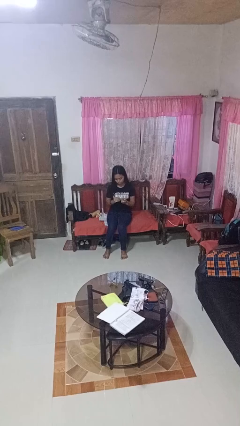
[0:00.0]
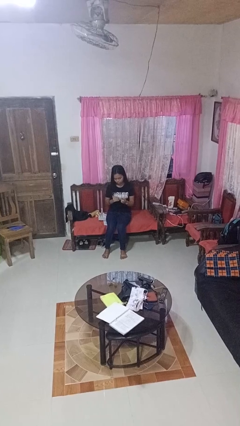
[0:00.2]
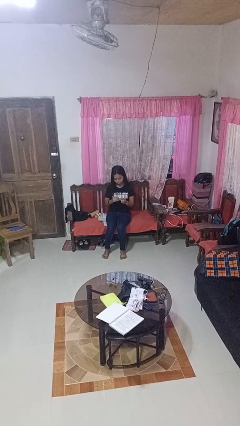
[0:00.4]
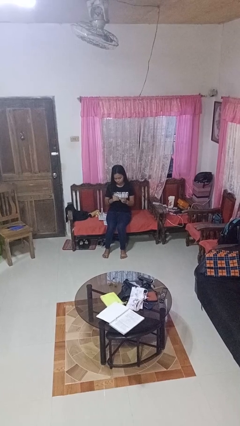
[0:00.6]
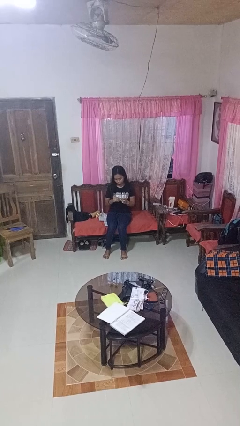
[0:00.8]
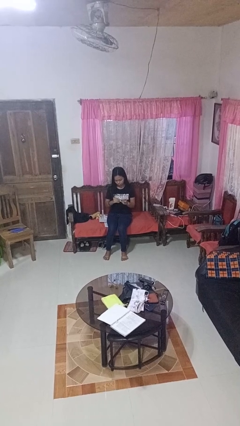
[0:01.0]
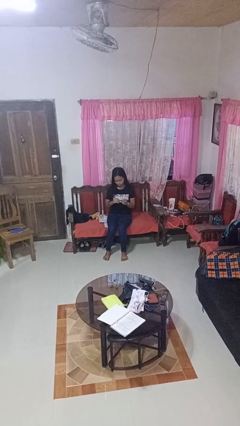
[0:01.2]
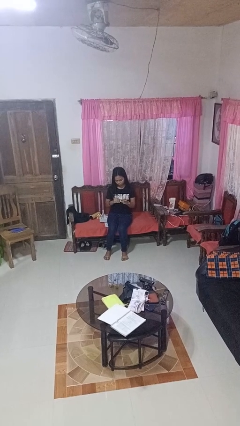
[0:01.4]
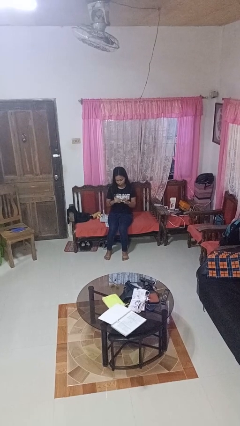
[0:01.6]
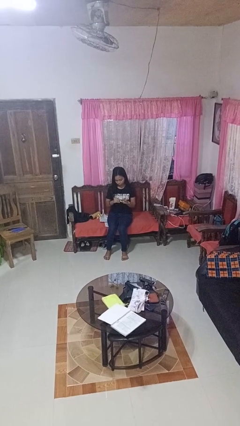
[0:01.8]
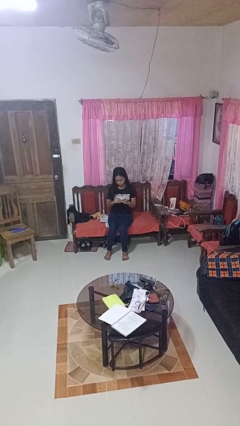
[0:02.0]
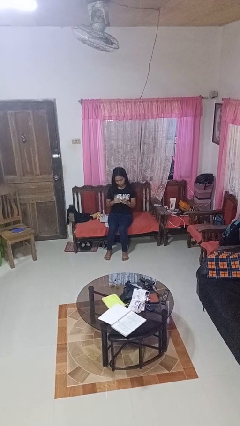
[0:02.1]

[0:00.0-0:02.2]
person clips fingernails

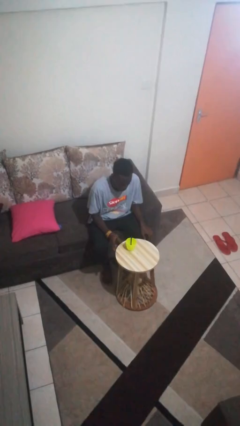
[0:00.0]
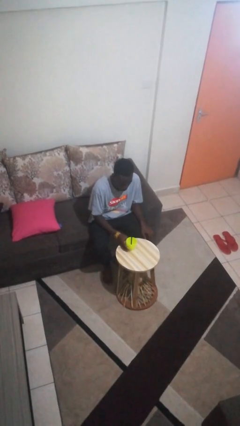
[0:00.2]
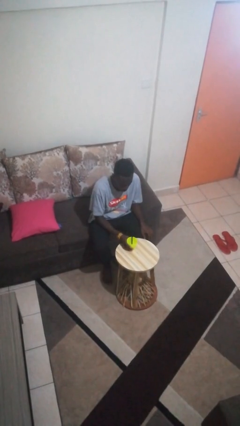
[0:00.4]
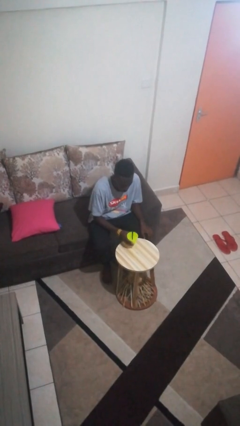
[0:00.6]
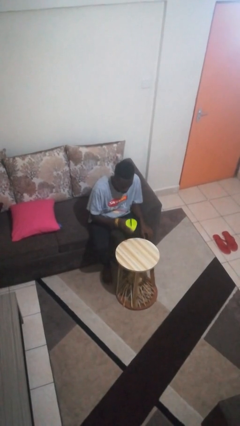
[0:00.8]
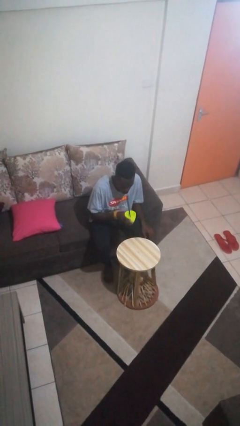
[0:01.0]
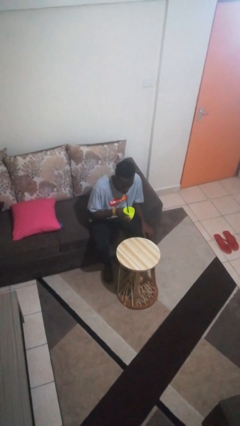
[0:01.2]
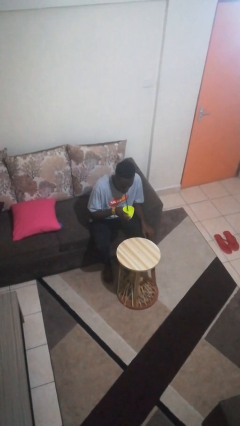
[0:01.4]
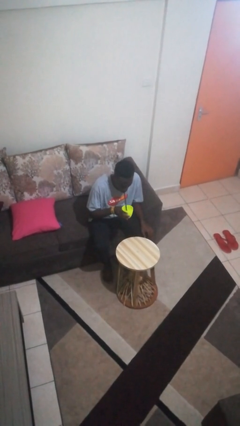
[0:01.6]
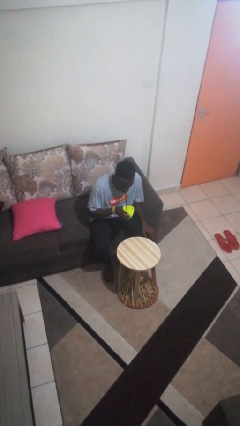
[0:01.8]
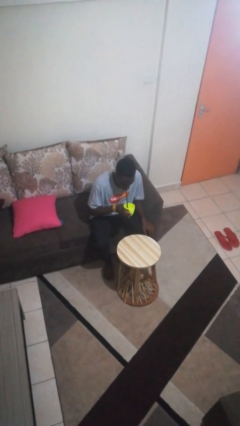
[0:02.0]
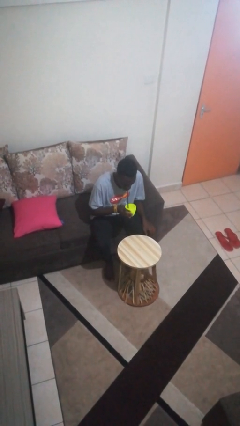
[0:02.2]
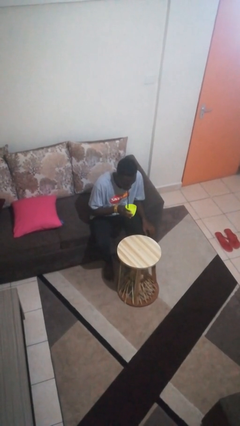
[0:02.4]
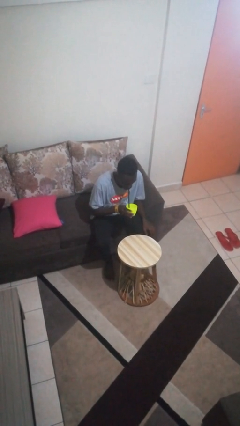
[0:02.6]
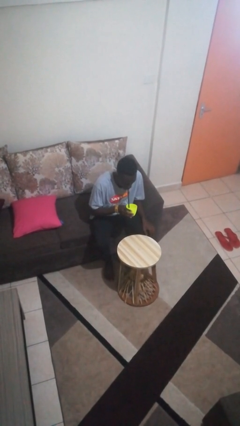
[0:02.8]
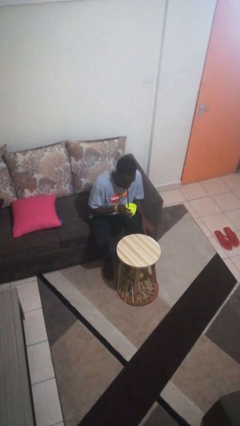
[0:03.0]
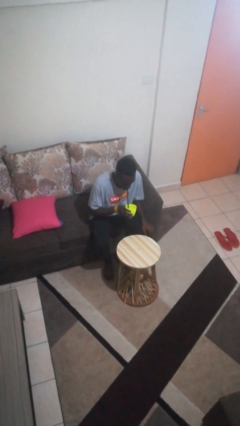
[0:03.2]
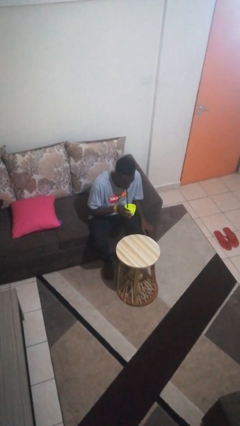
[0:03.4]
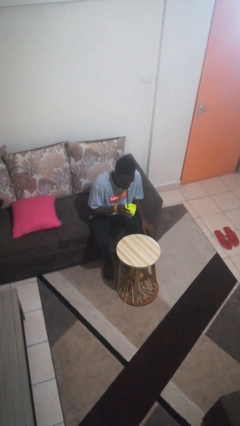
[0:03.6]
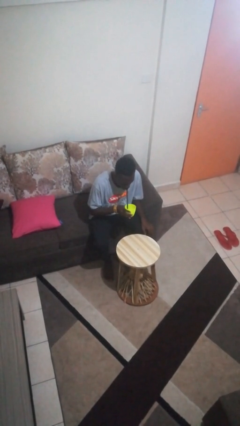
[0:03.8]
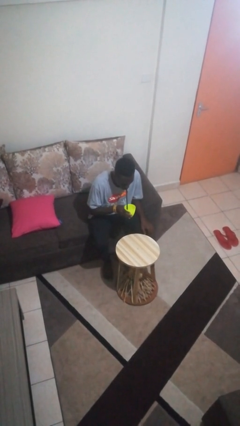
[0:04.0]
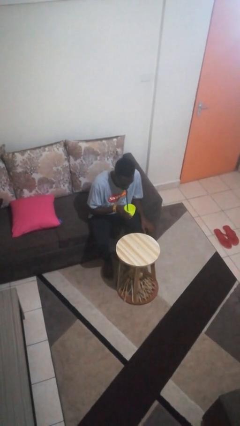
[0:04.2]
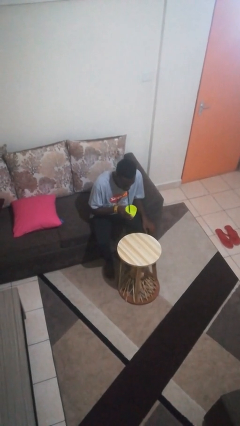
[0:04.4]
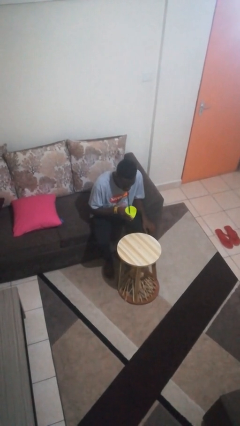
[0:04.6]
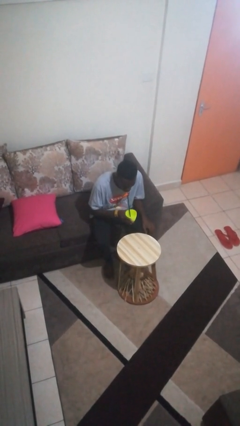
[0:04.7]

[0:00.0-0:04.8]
person drinks from straw

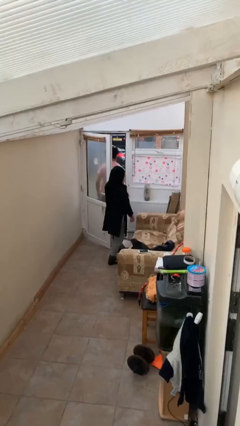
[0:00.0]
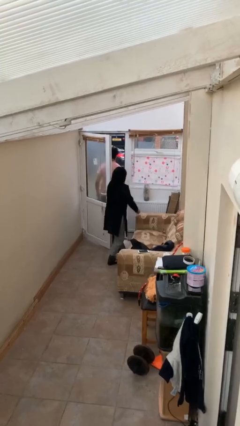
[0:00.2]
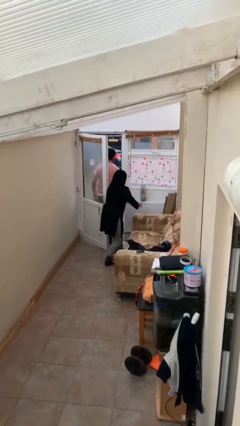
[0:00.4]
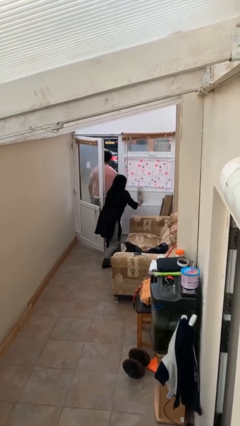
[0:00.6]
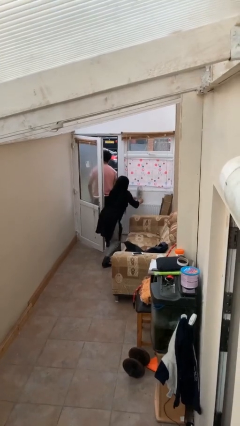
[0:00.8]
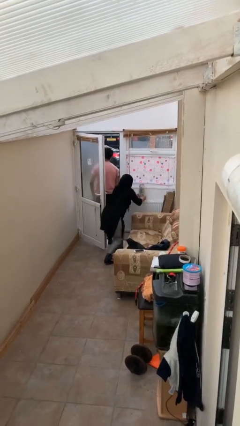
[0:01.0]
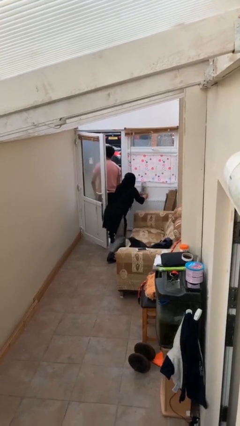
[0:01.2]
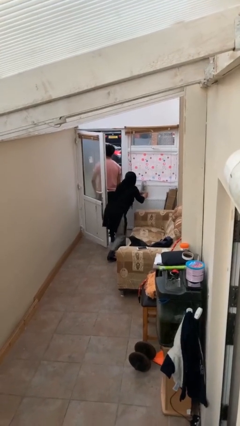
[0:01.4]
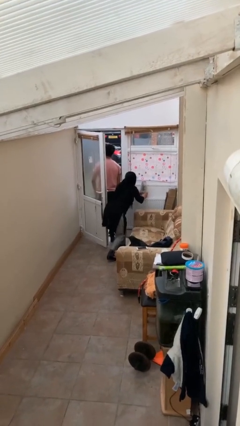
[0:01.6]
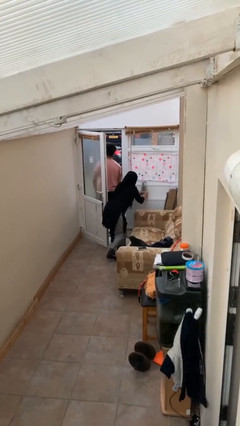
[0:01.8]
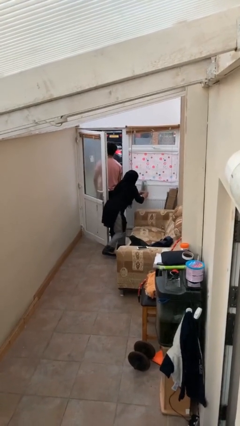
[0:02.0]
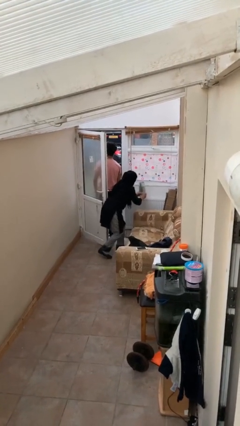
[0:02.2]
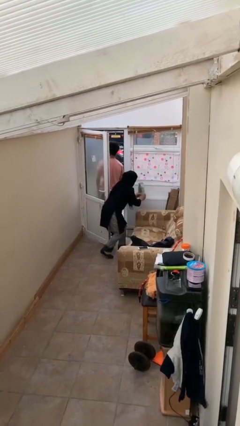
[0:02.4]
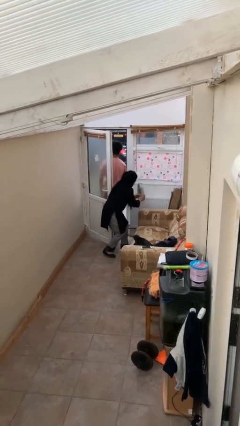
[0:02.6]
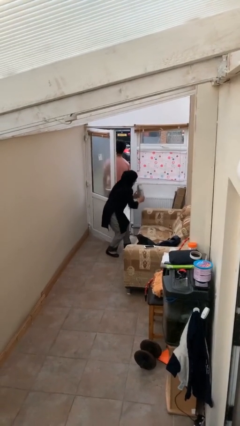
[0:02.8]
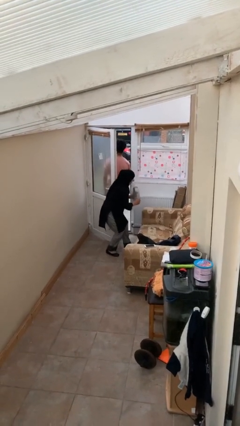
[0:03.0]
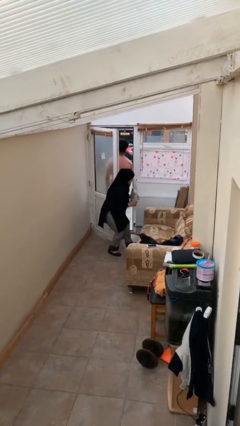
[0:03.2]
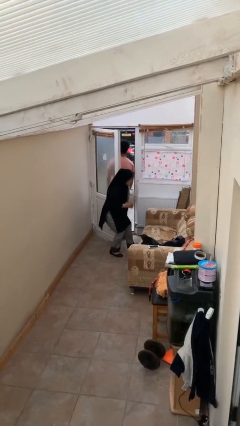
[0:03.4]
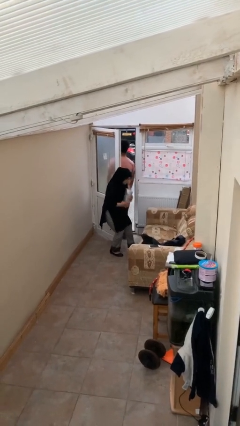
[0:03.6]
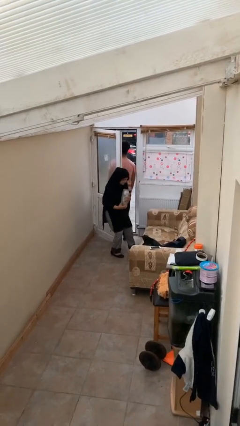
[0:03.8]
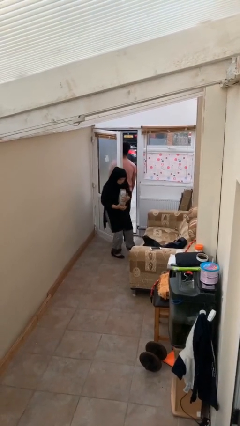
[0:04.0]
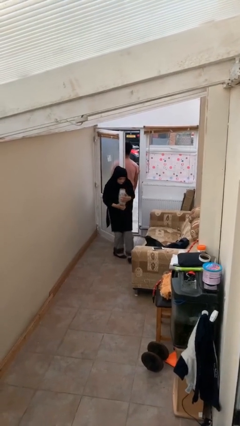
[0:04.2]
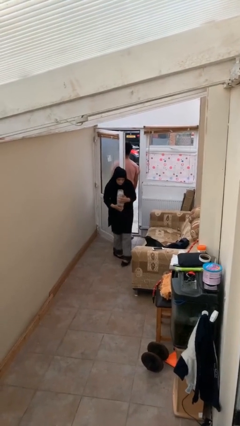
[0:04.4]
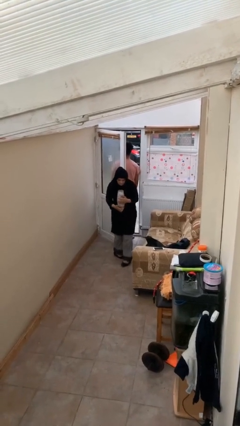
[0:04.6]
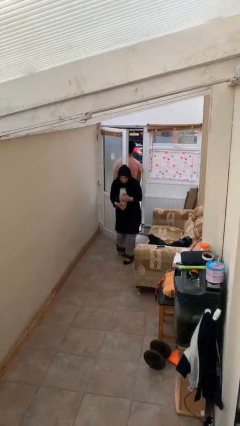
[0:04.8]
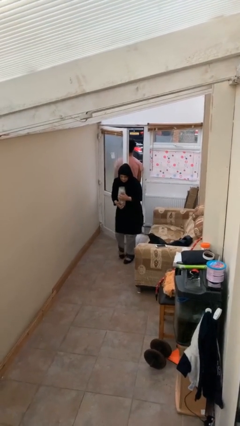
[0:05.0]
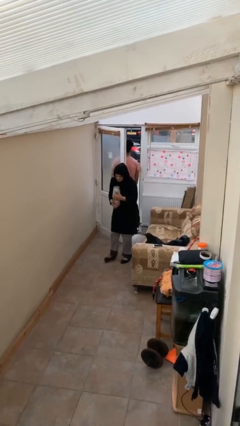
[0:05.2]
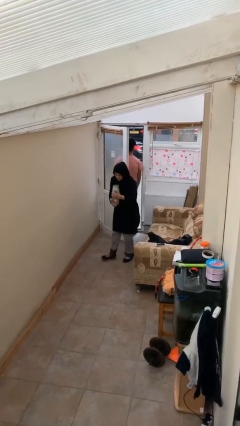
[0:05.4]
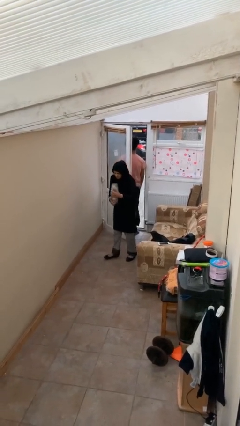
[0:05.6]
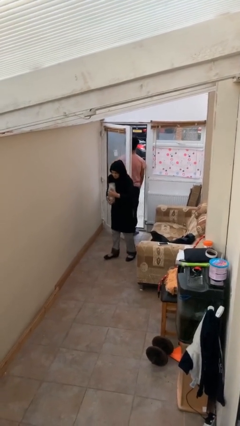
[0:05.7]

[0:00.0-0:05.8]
person steals object from person

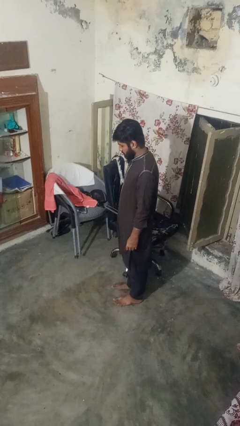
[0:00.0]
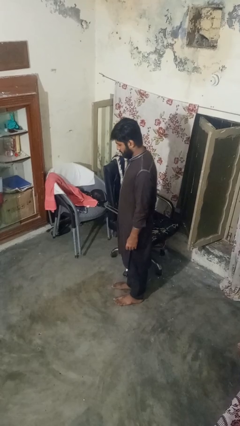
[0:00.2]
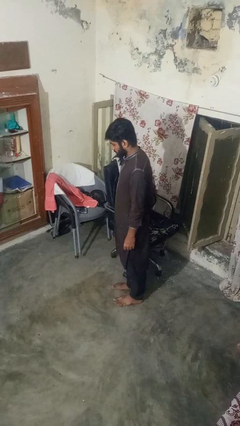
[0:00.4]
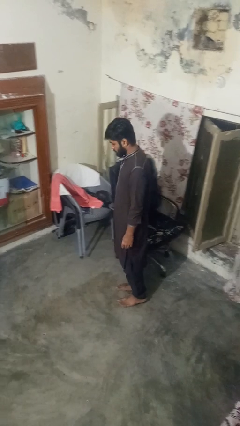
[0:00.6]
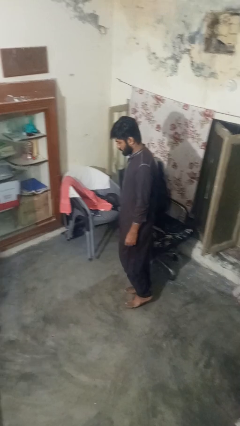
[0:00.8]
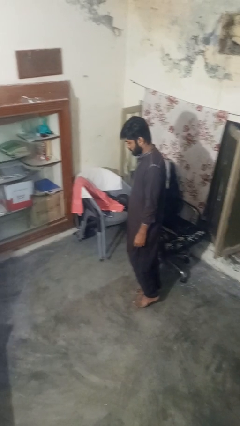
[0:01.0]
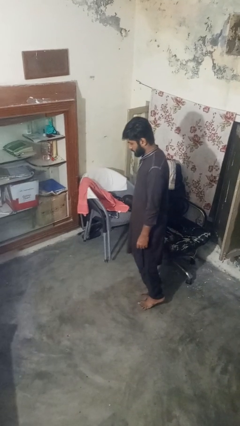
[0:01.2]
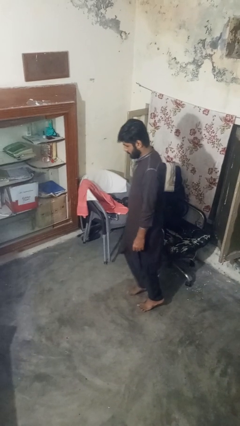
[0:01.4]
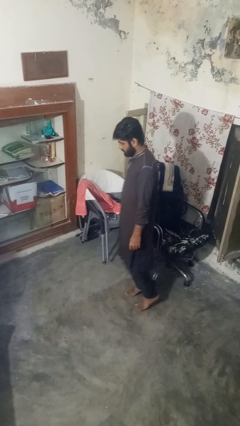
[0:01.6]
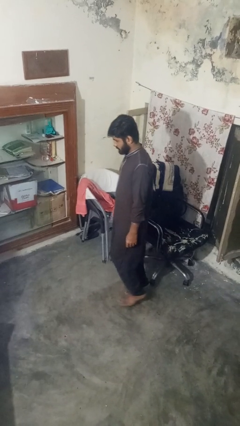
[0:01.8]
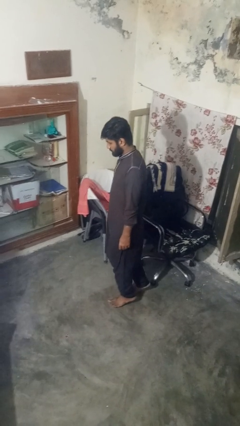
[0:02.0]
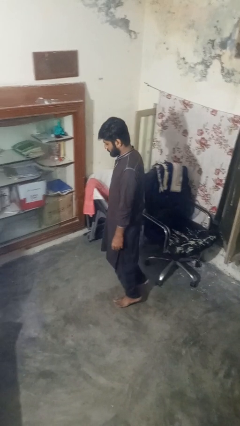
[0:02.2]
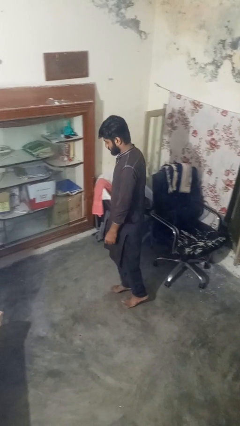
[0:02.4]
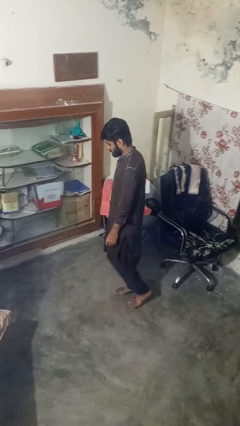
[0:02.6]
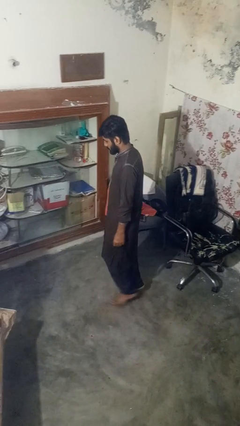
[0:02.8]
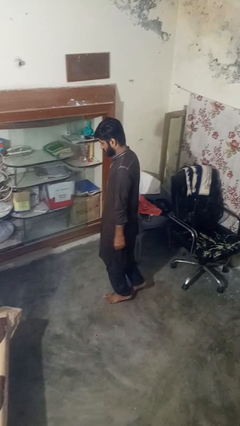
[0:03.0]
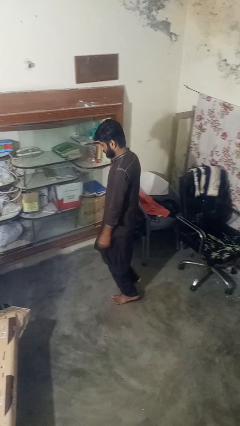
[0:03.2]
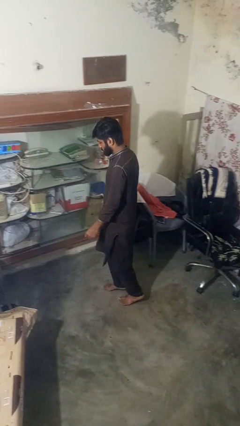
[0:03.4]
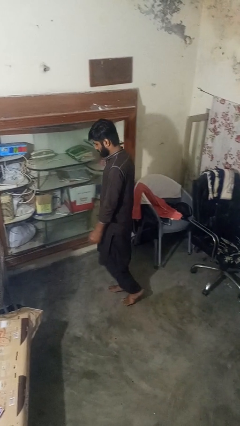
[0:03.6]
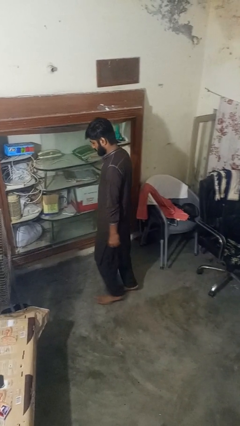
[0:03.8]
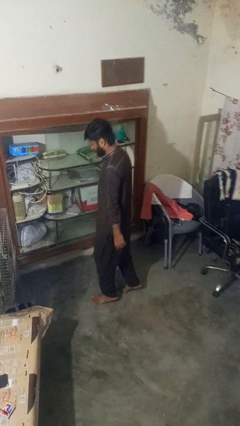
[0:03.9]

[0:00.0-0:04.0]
person walks tiptoe

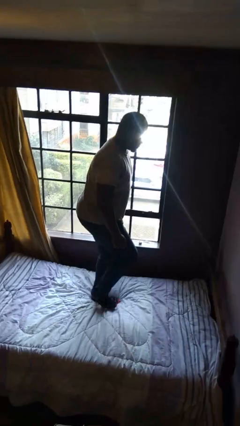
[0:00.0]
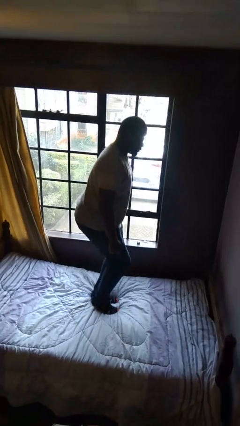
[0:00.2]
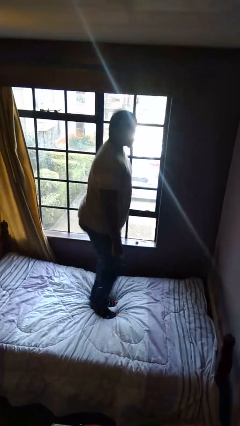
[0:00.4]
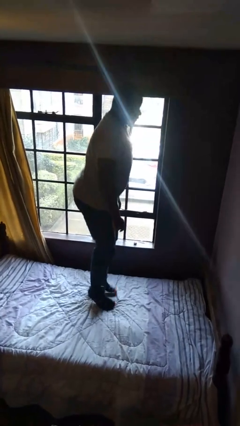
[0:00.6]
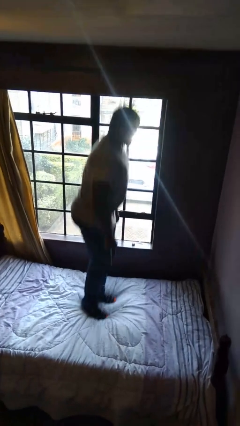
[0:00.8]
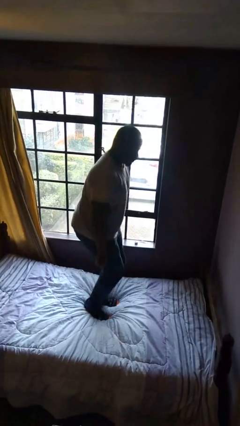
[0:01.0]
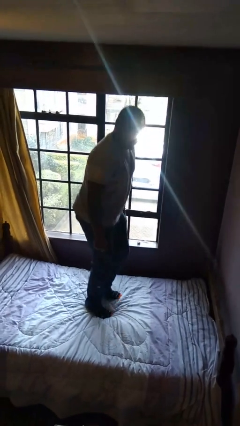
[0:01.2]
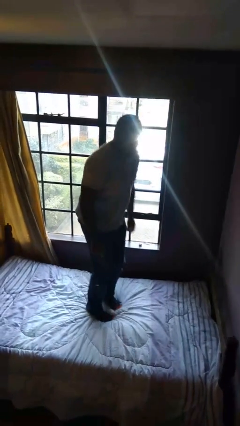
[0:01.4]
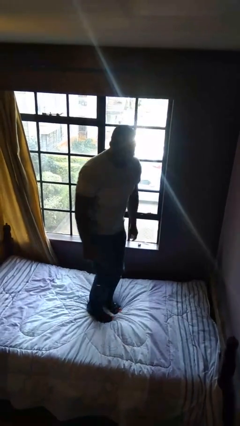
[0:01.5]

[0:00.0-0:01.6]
person jumps on bed
